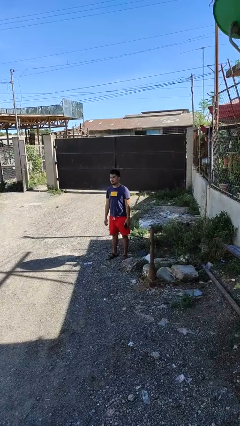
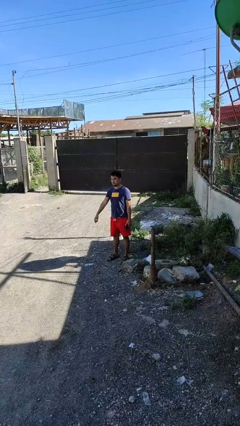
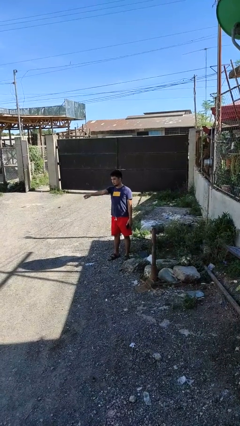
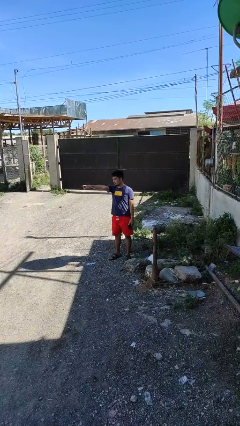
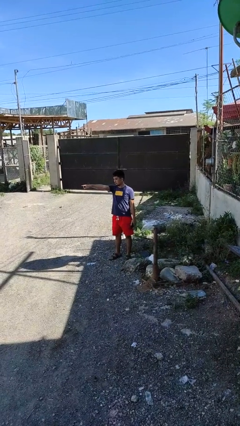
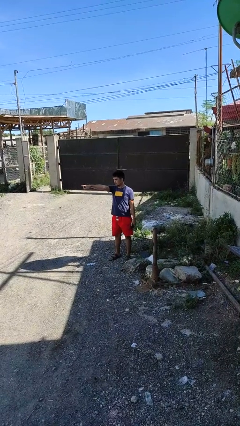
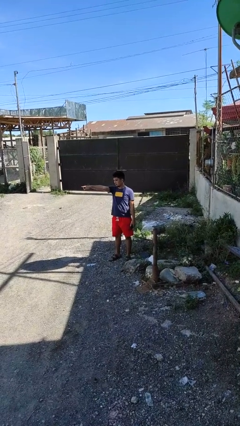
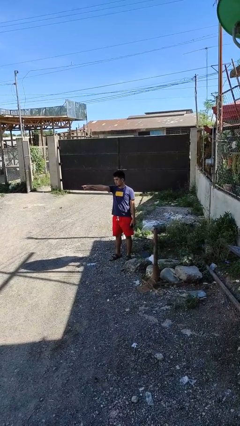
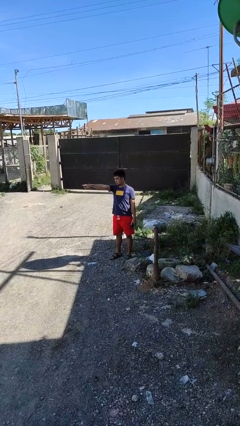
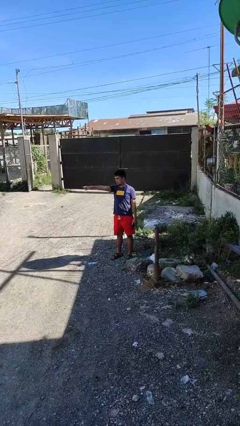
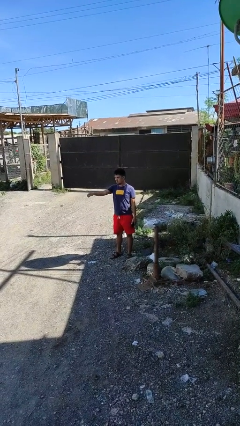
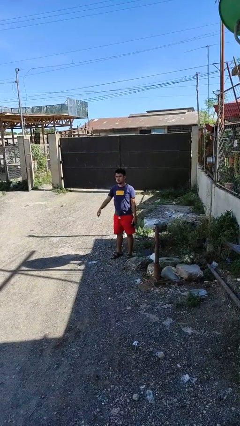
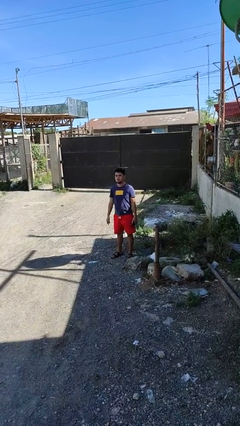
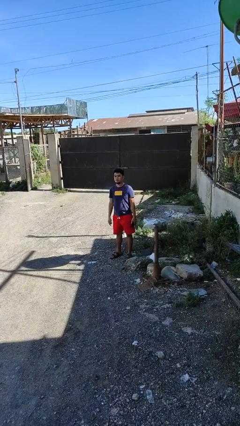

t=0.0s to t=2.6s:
person points at person

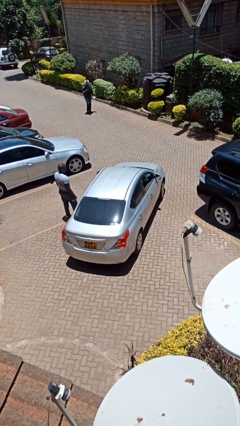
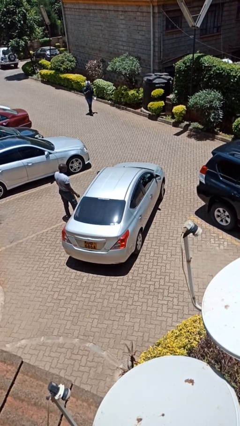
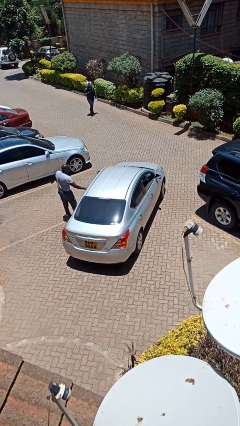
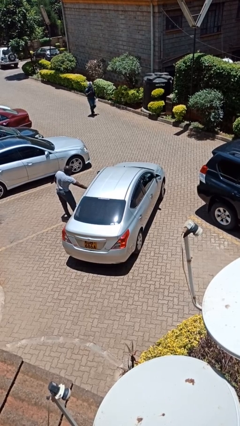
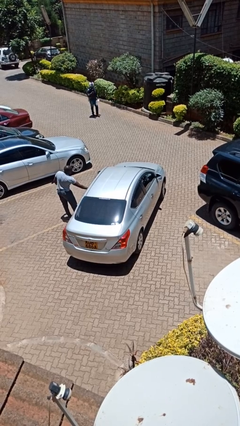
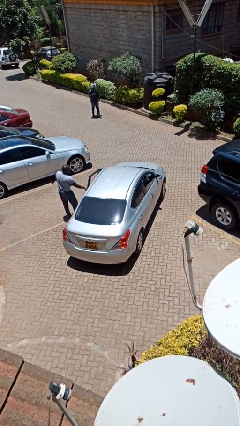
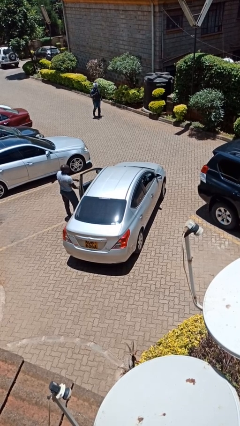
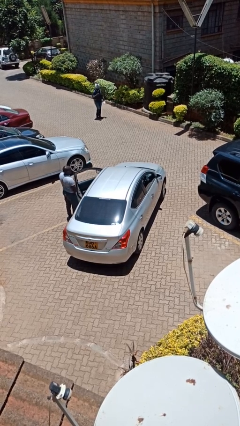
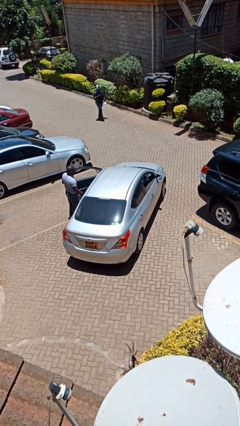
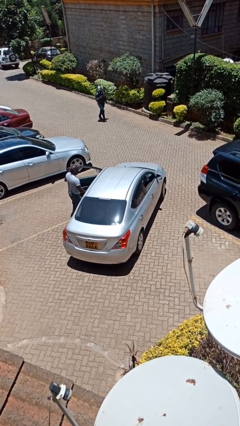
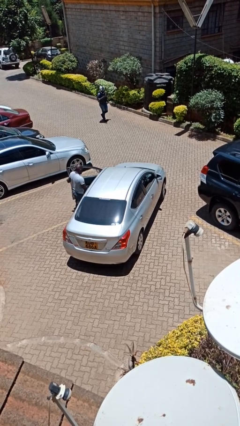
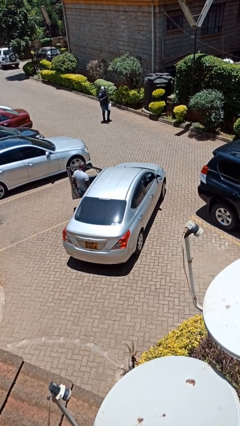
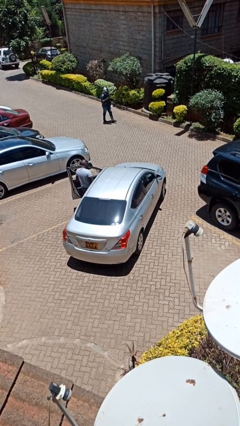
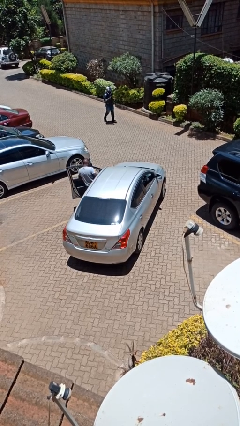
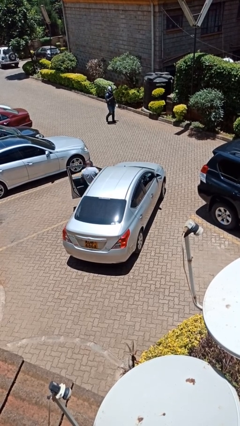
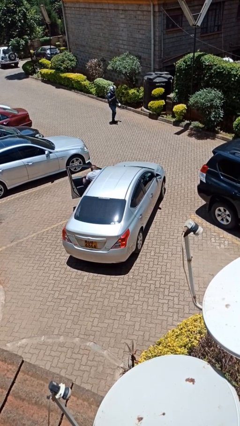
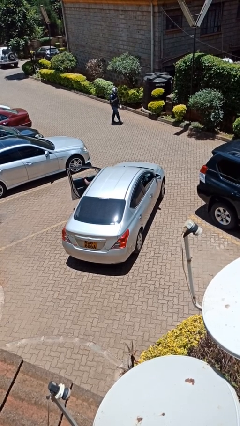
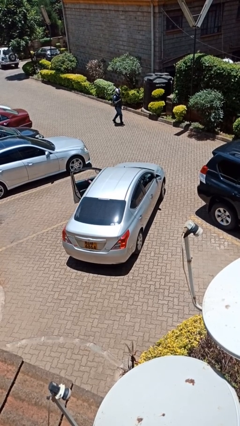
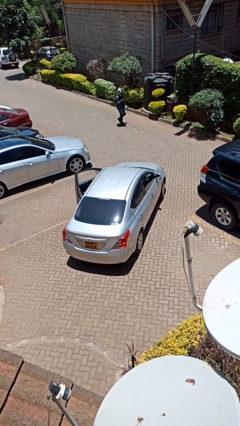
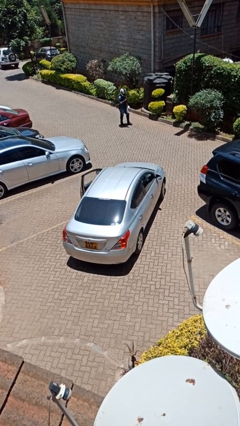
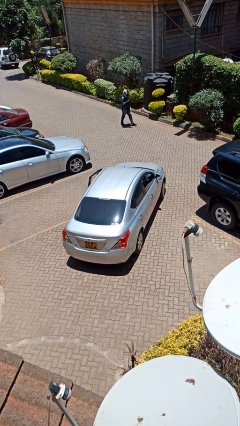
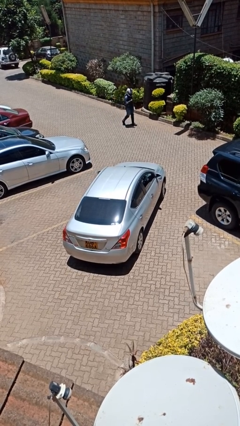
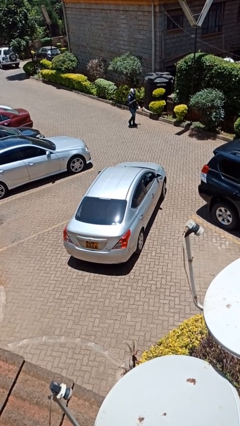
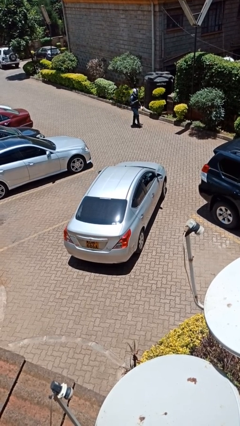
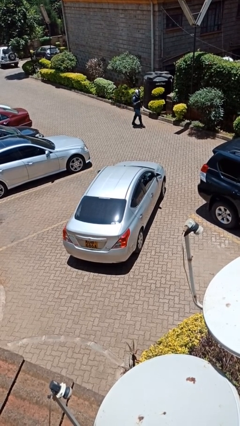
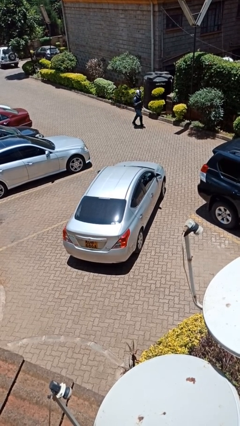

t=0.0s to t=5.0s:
car picks up person

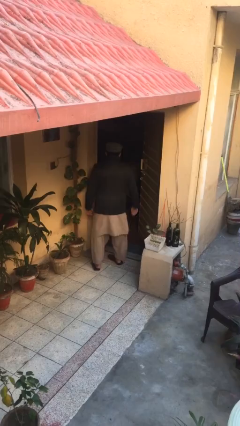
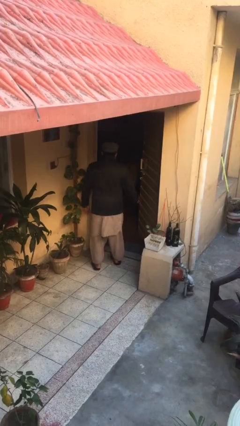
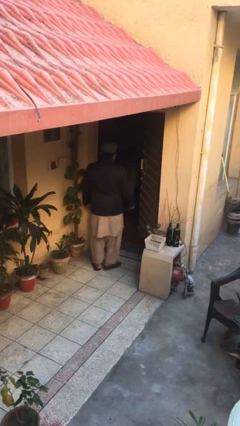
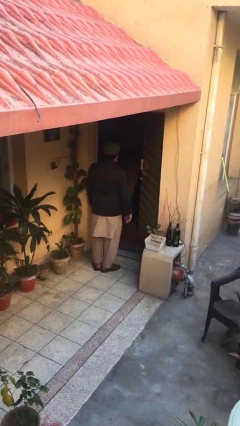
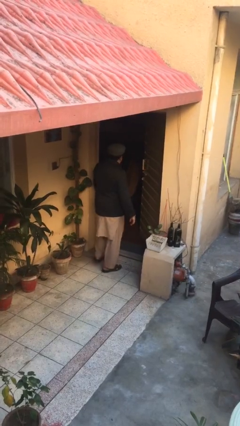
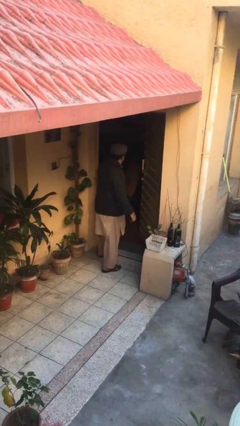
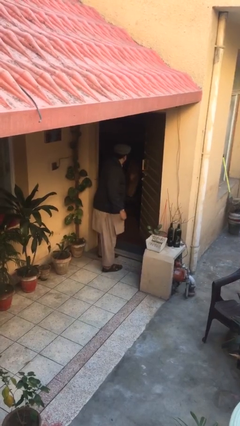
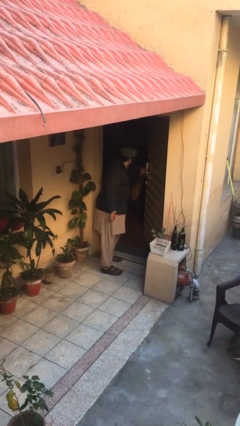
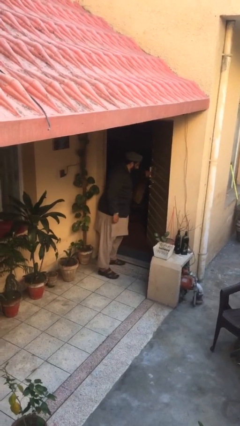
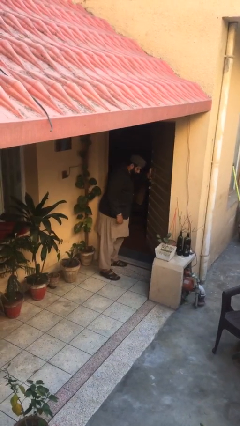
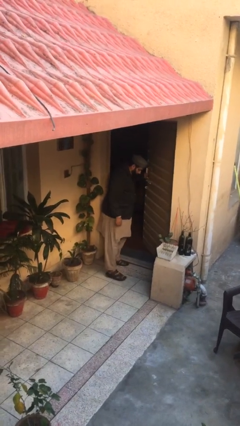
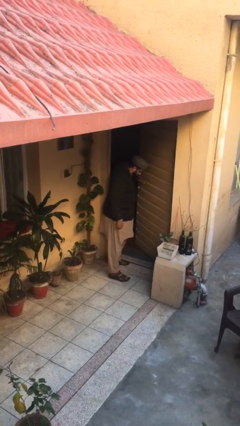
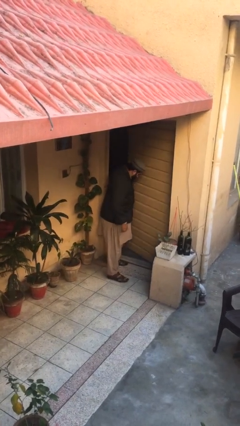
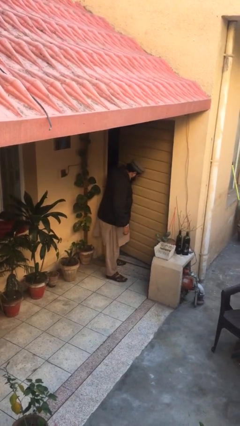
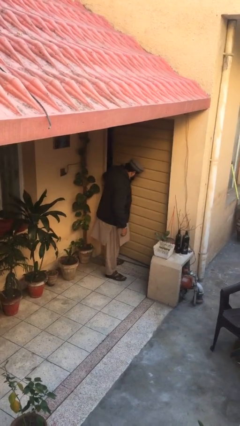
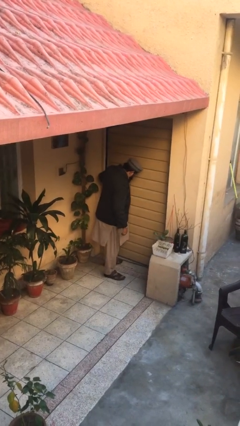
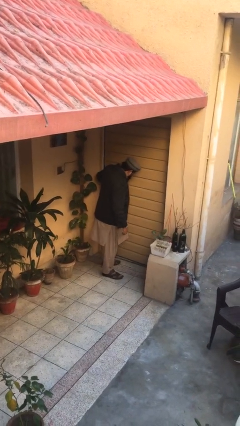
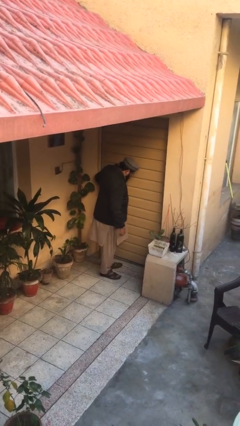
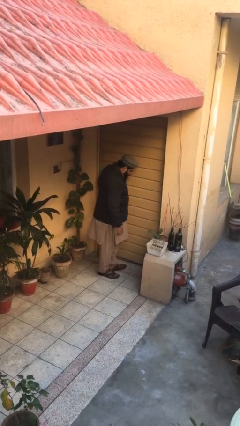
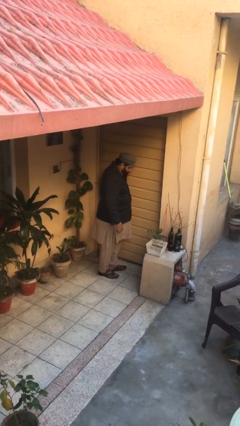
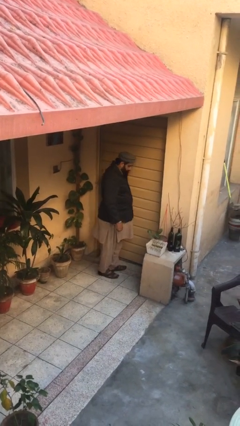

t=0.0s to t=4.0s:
person closes facility door

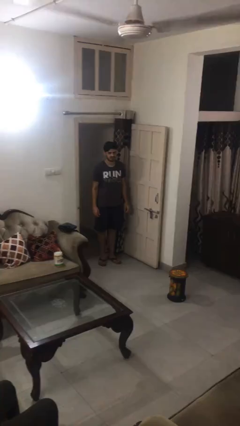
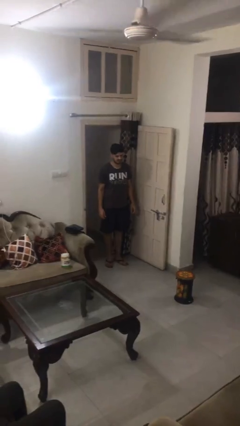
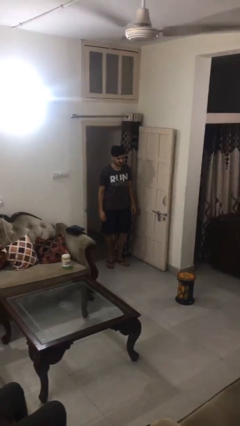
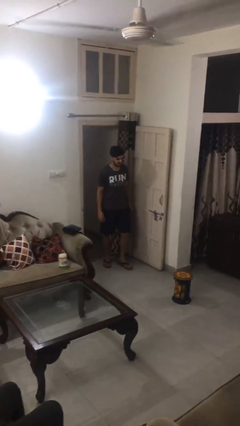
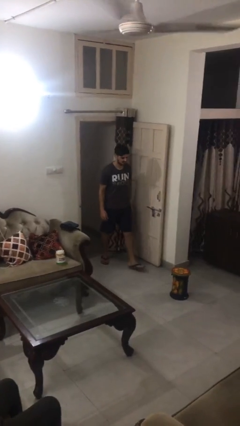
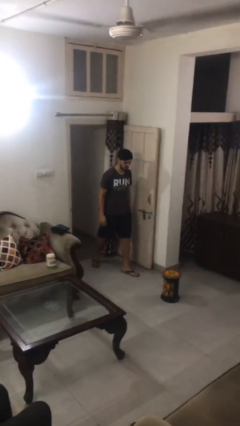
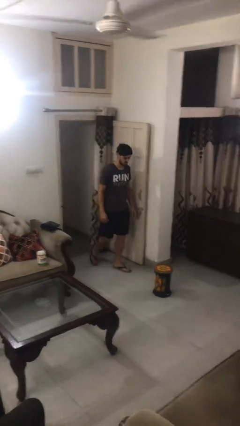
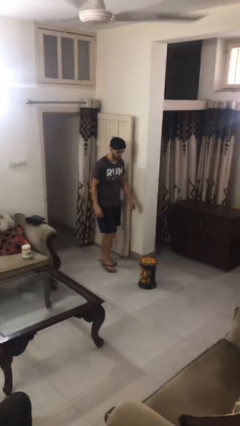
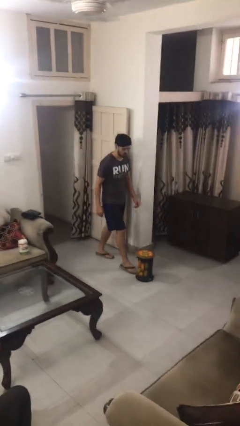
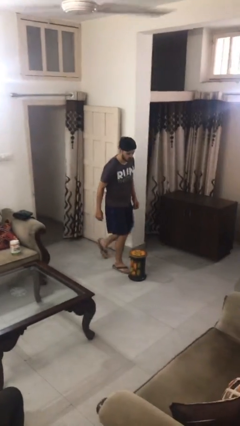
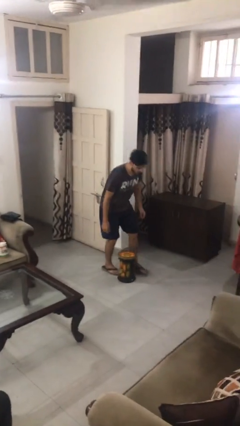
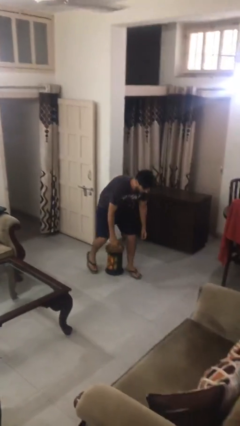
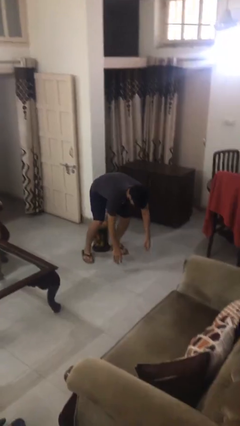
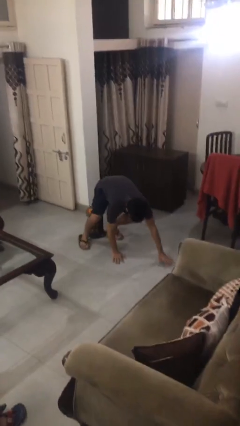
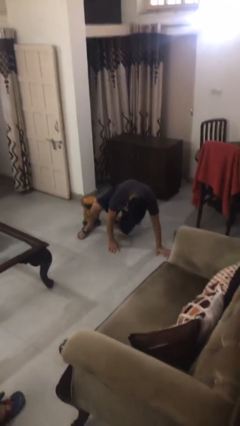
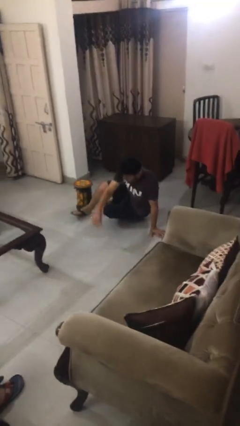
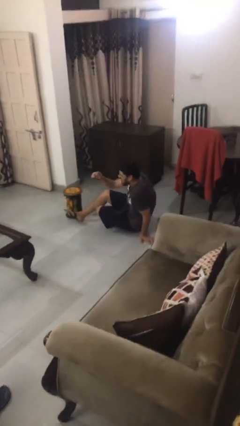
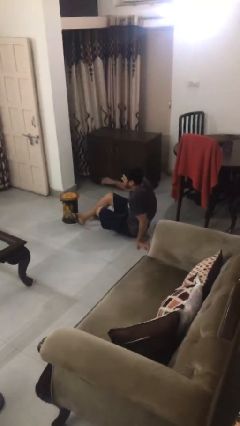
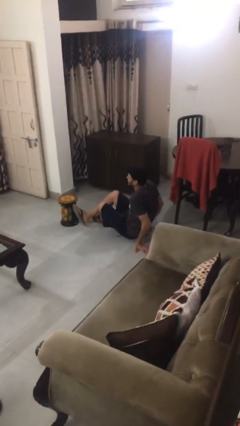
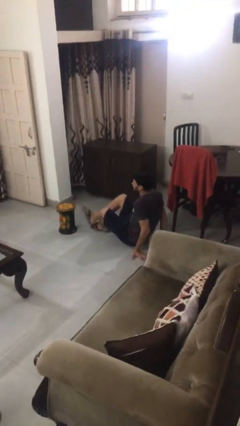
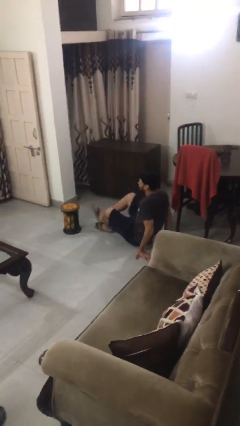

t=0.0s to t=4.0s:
person trips on object on floor

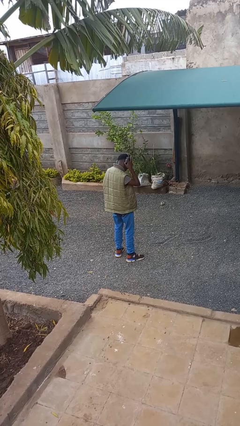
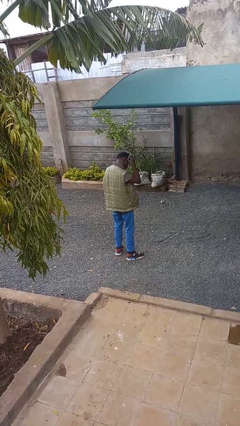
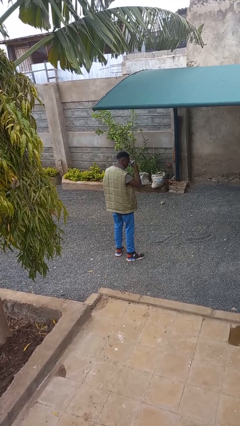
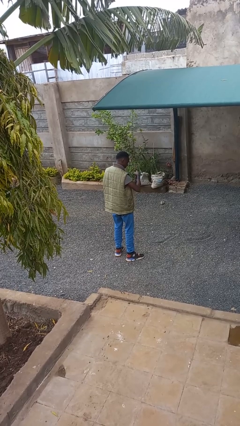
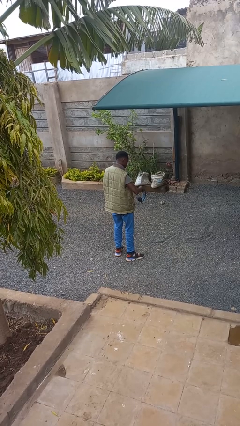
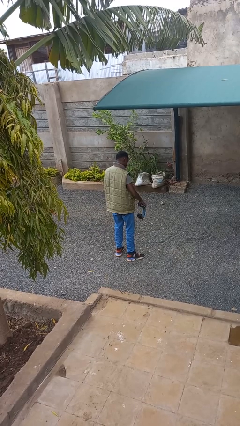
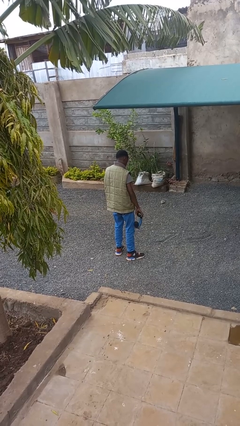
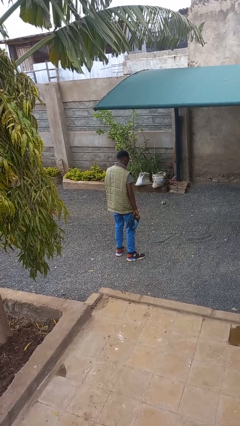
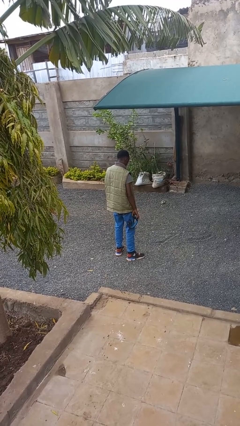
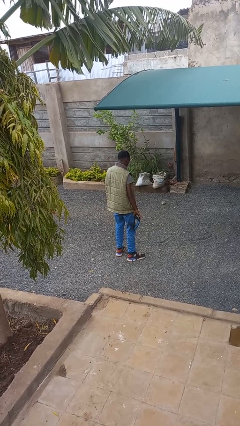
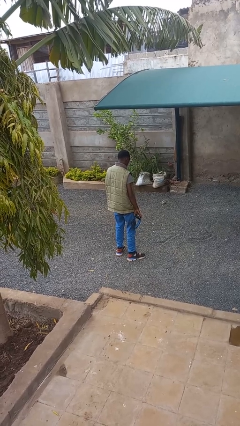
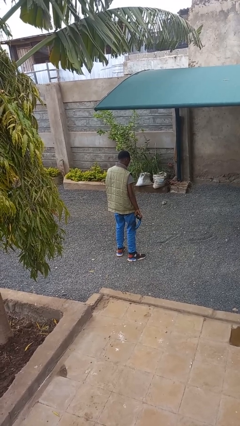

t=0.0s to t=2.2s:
person takes off headphones
